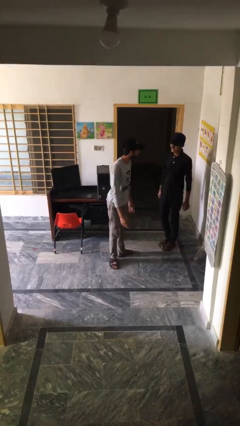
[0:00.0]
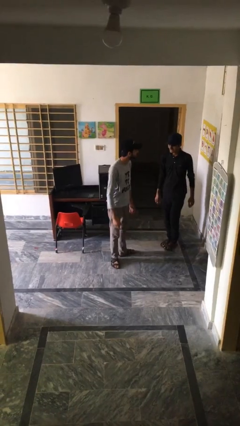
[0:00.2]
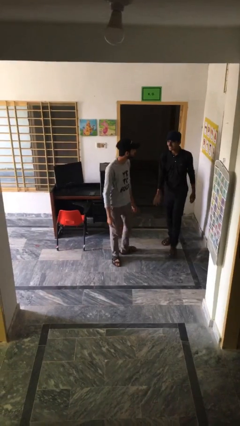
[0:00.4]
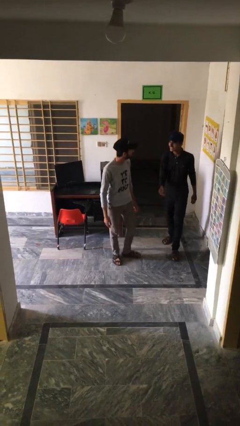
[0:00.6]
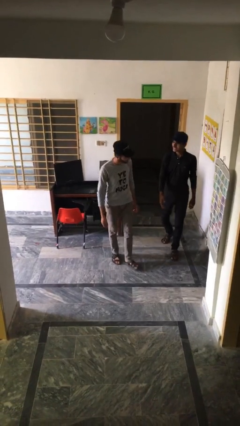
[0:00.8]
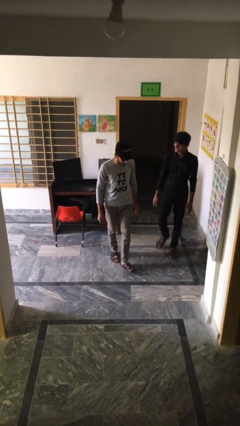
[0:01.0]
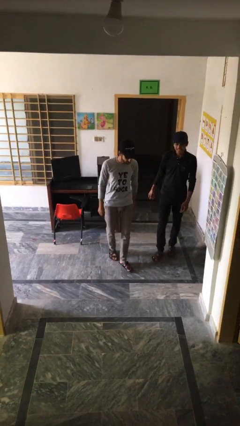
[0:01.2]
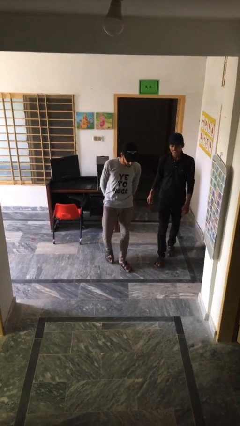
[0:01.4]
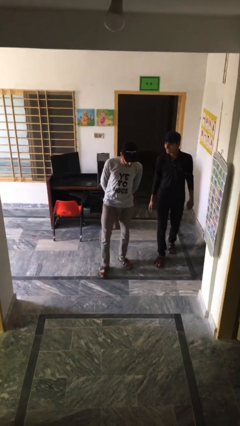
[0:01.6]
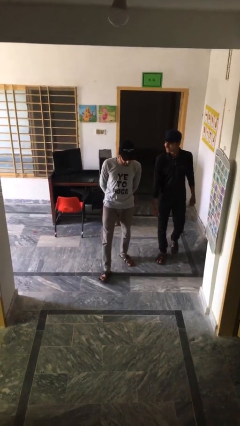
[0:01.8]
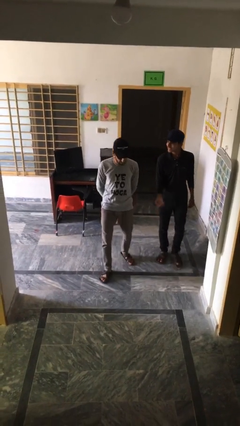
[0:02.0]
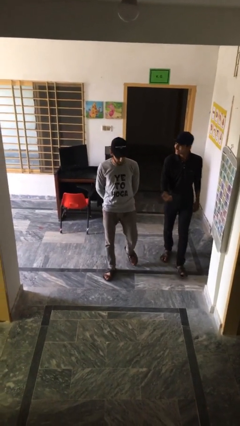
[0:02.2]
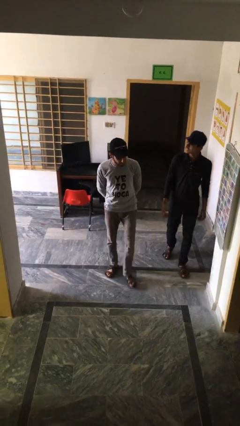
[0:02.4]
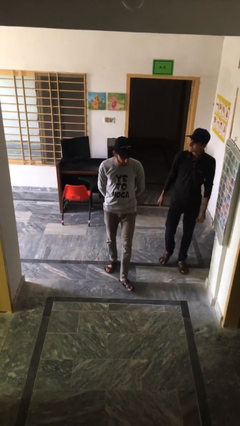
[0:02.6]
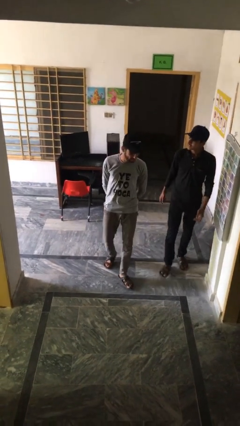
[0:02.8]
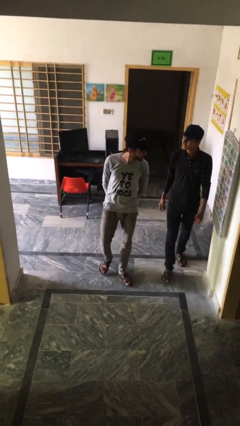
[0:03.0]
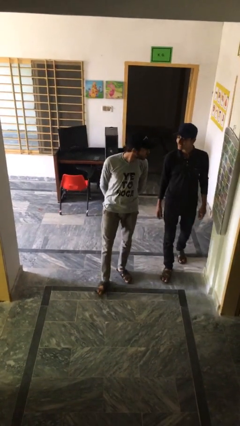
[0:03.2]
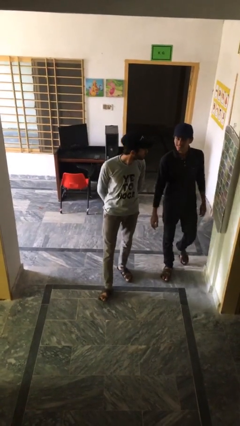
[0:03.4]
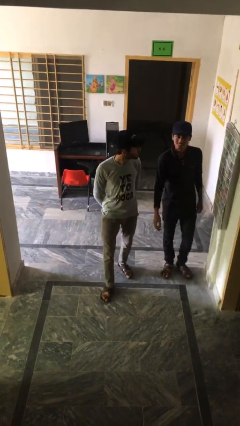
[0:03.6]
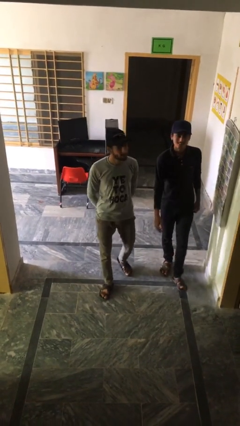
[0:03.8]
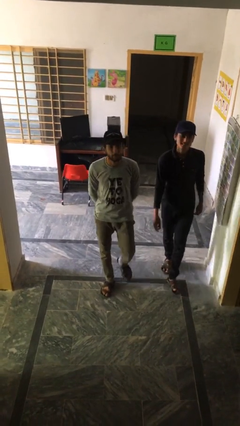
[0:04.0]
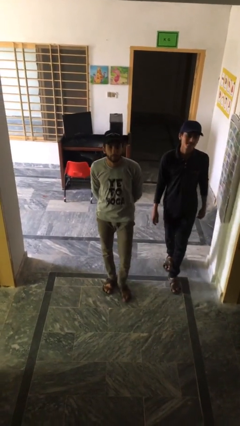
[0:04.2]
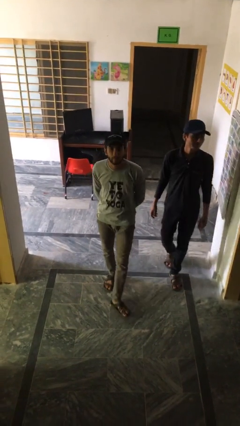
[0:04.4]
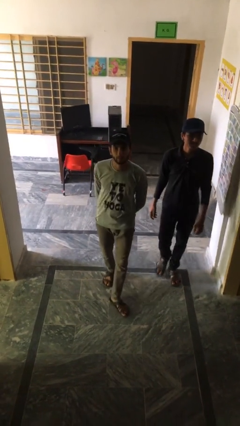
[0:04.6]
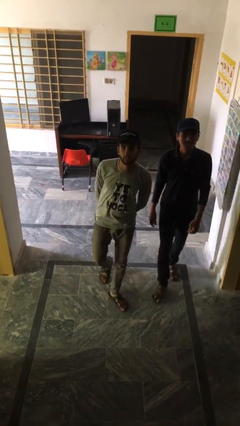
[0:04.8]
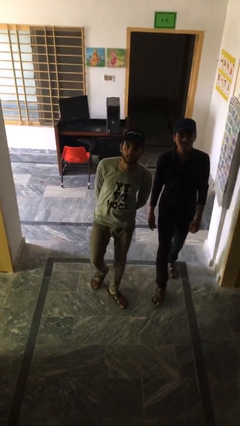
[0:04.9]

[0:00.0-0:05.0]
person talks to person

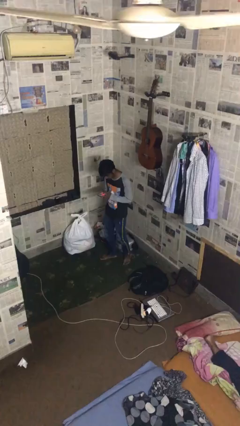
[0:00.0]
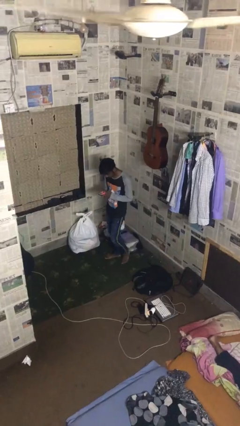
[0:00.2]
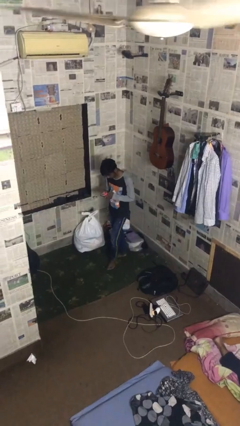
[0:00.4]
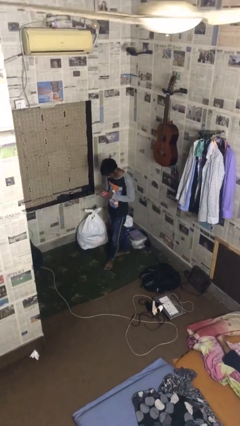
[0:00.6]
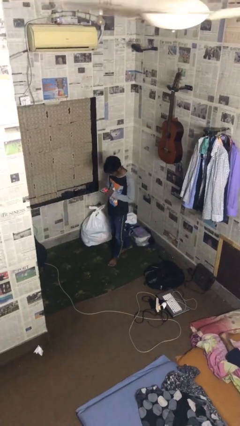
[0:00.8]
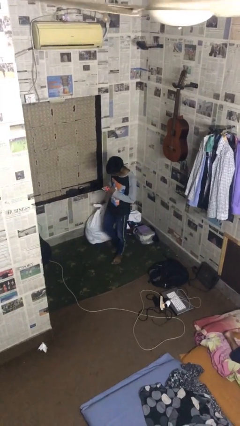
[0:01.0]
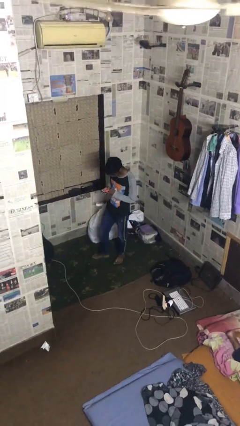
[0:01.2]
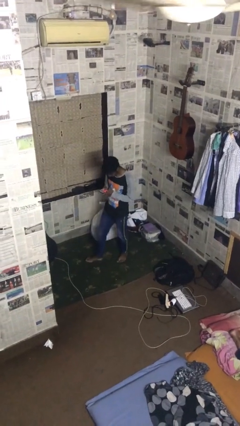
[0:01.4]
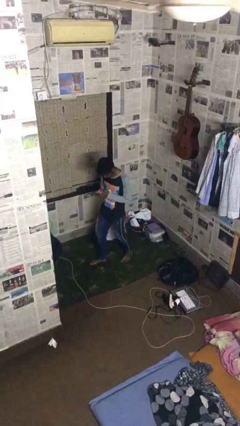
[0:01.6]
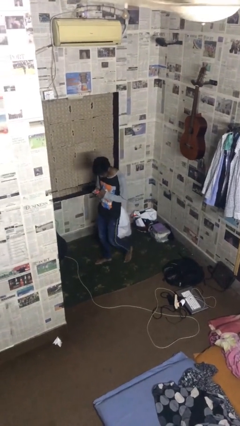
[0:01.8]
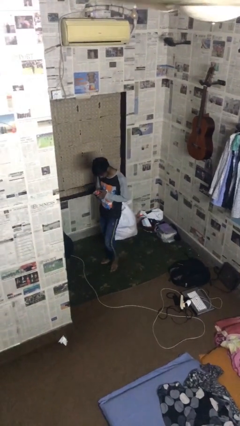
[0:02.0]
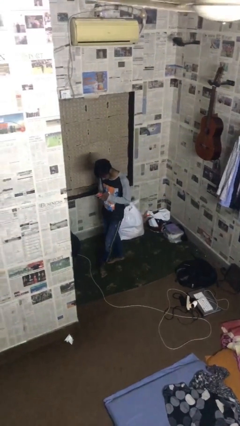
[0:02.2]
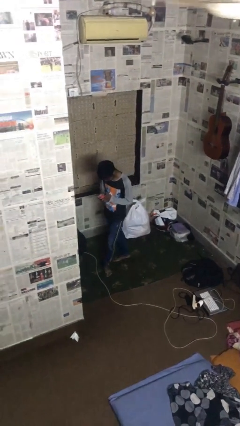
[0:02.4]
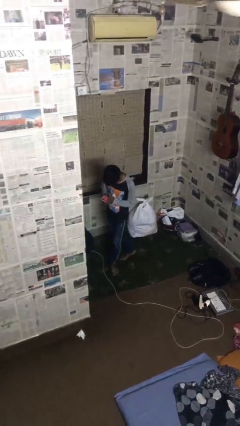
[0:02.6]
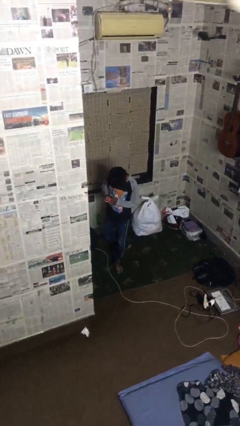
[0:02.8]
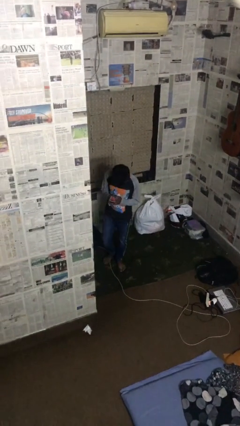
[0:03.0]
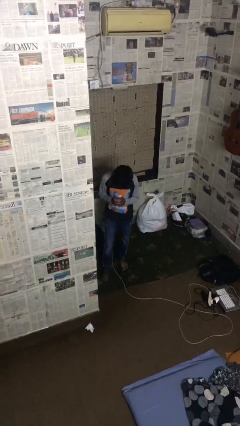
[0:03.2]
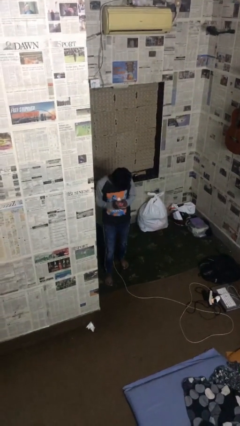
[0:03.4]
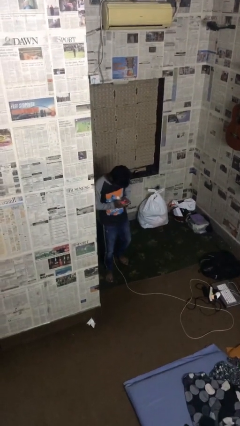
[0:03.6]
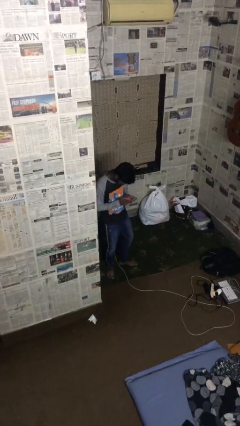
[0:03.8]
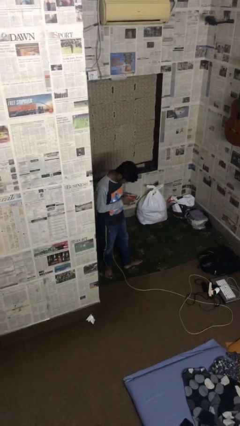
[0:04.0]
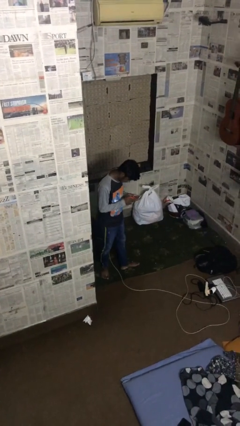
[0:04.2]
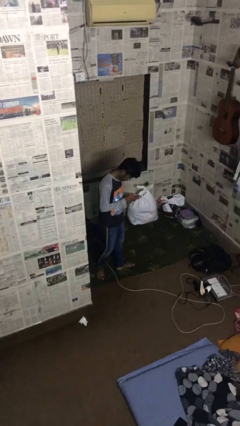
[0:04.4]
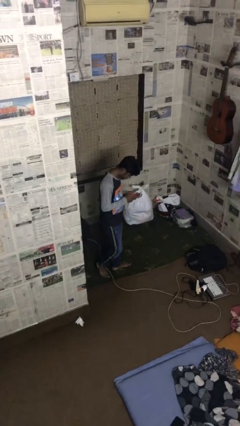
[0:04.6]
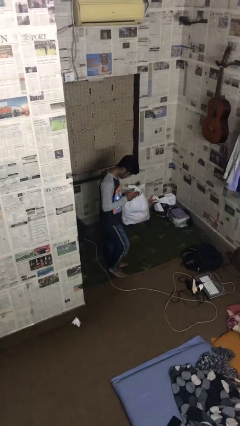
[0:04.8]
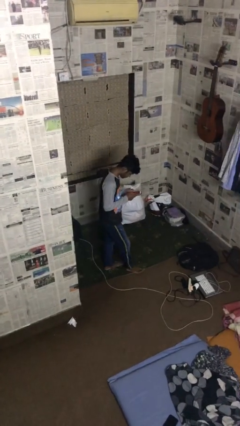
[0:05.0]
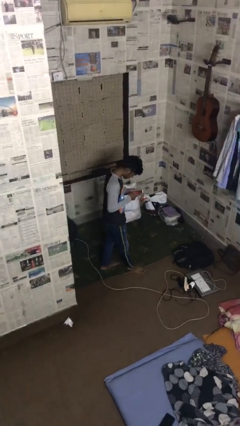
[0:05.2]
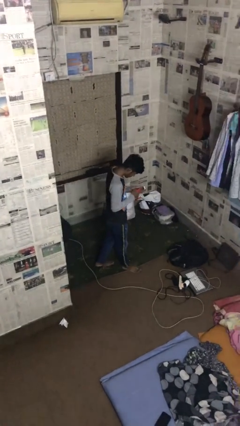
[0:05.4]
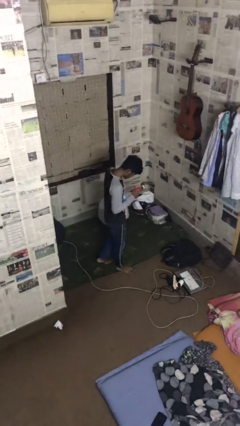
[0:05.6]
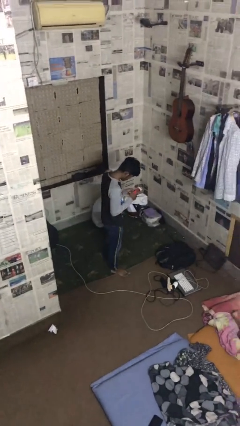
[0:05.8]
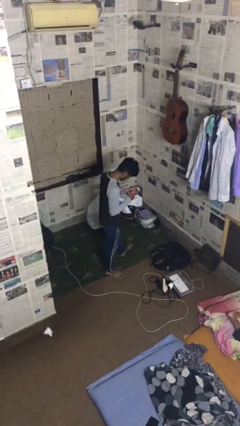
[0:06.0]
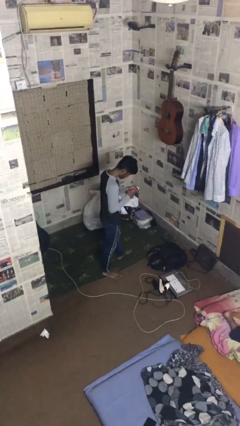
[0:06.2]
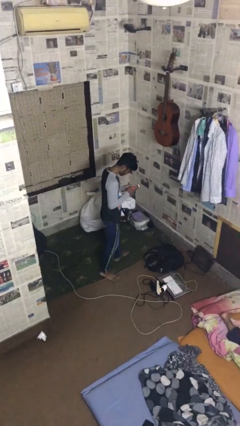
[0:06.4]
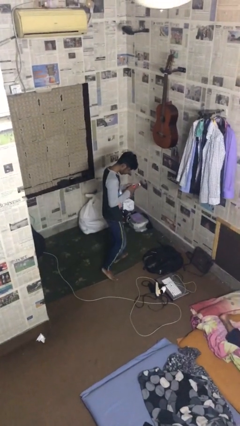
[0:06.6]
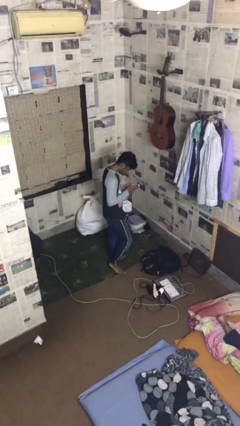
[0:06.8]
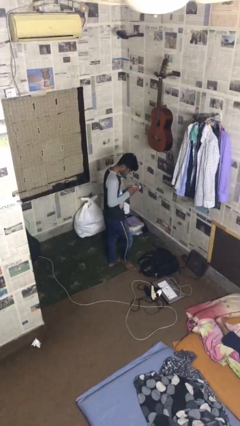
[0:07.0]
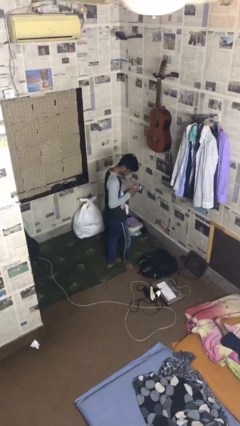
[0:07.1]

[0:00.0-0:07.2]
person texts on phone

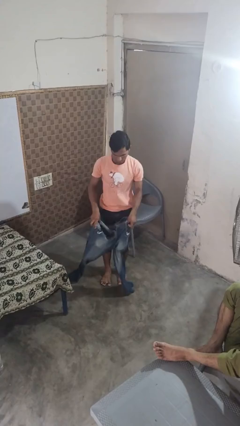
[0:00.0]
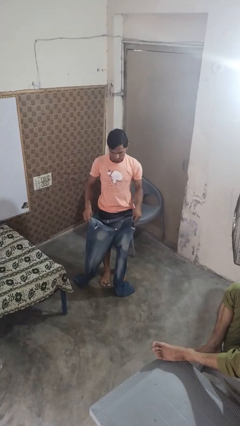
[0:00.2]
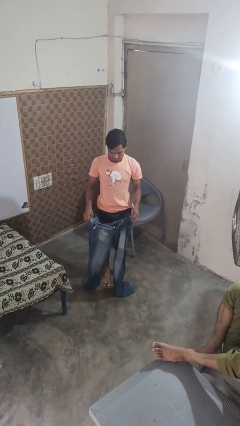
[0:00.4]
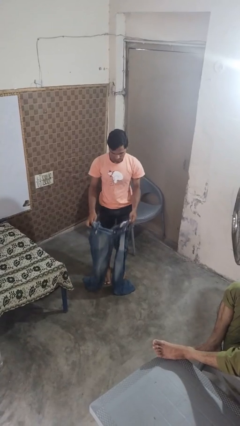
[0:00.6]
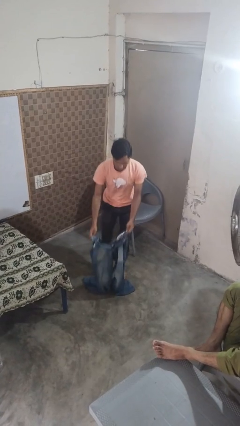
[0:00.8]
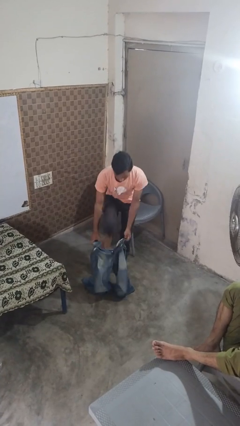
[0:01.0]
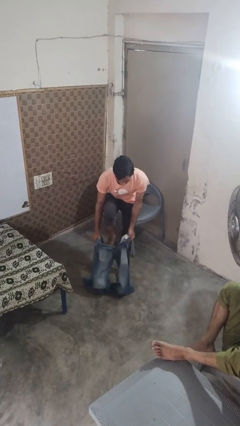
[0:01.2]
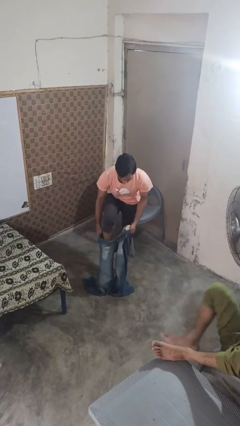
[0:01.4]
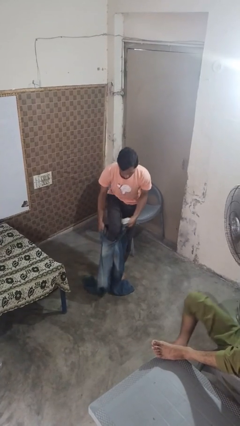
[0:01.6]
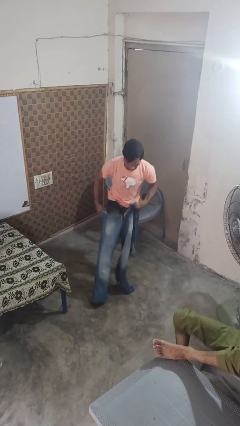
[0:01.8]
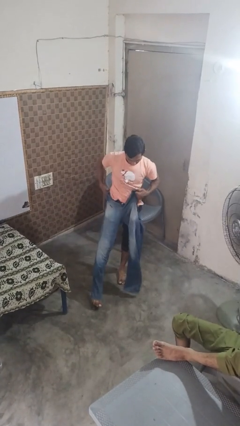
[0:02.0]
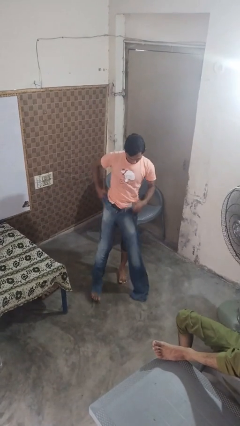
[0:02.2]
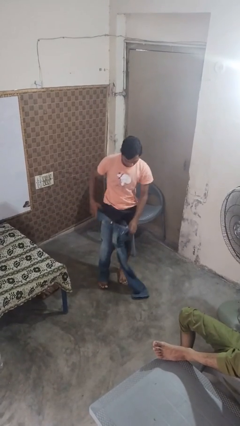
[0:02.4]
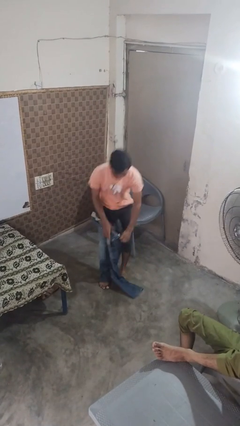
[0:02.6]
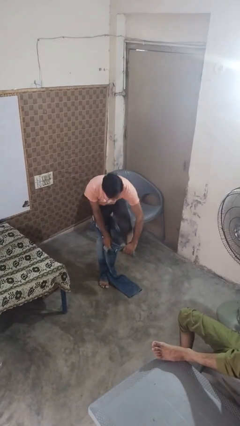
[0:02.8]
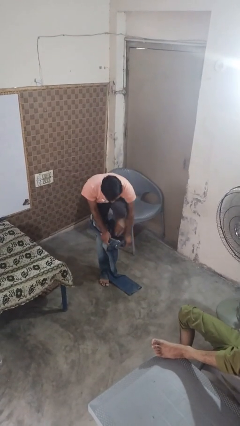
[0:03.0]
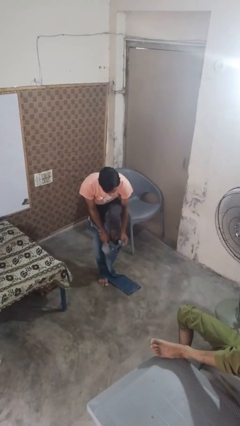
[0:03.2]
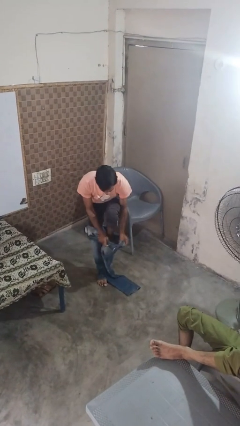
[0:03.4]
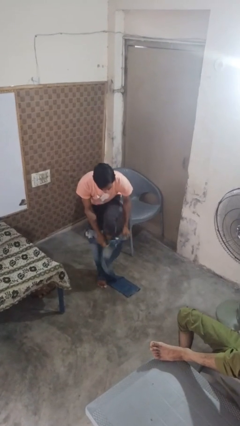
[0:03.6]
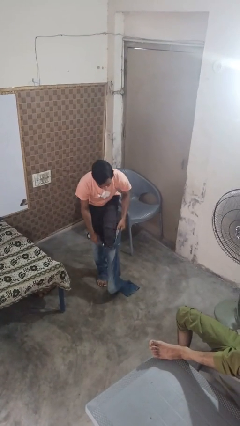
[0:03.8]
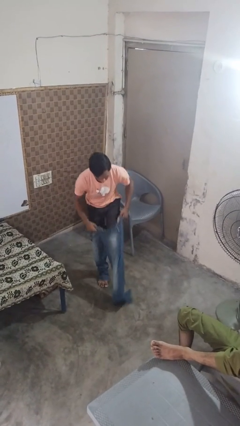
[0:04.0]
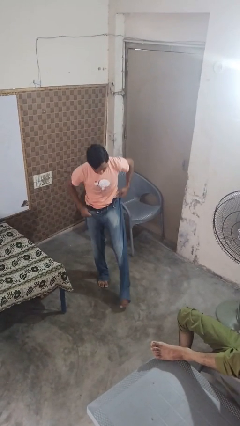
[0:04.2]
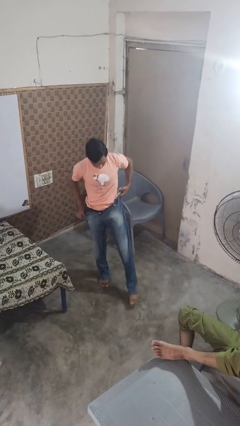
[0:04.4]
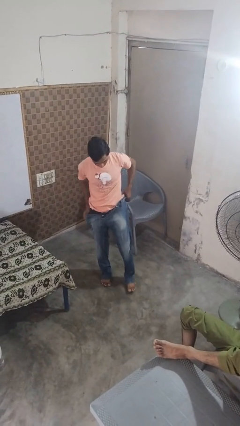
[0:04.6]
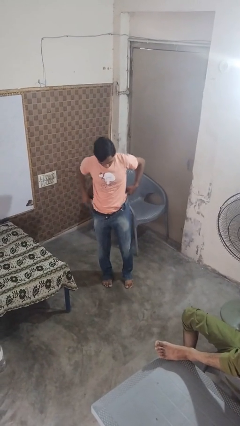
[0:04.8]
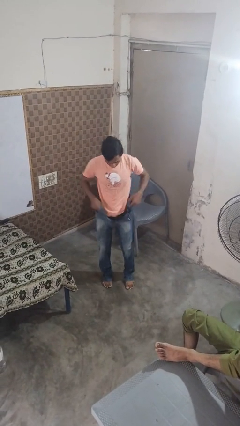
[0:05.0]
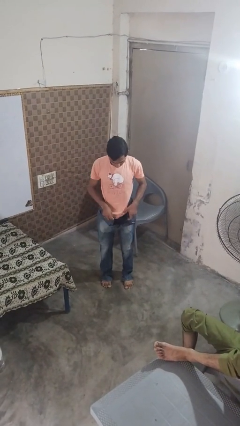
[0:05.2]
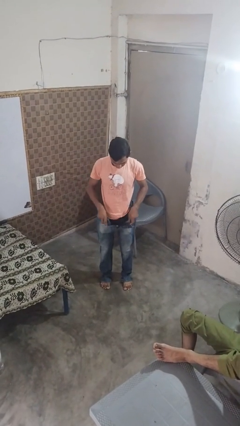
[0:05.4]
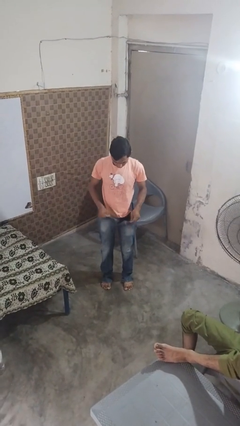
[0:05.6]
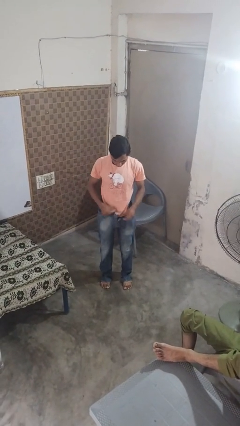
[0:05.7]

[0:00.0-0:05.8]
person puts on pants
